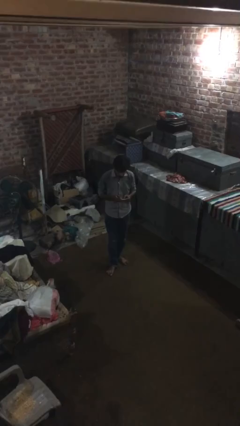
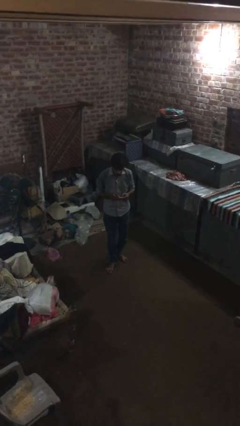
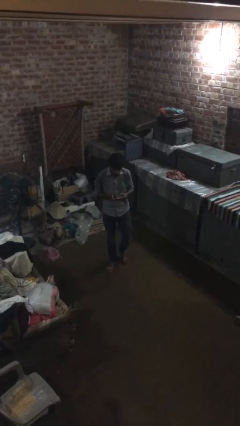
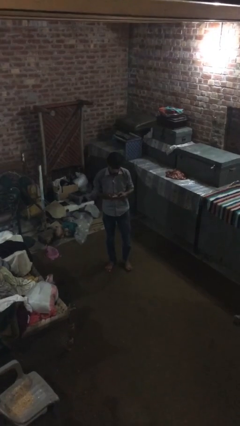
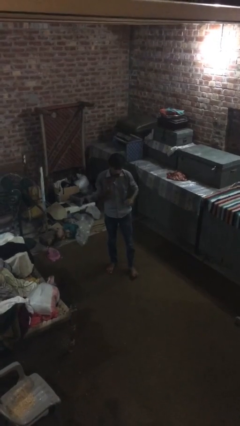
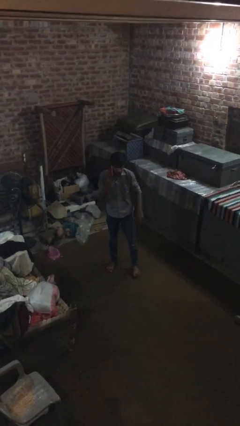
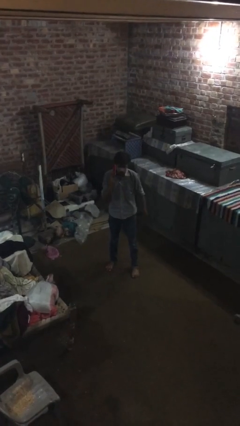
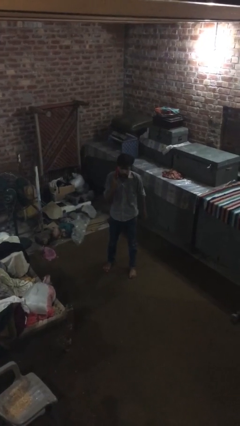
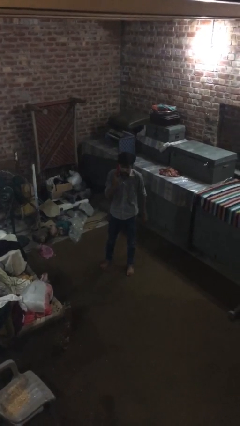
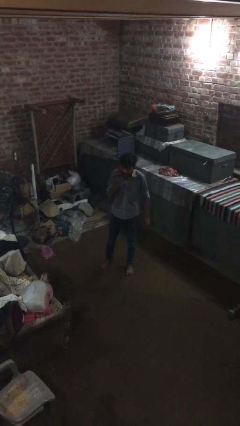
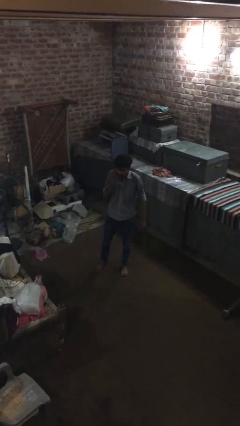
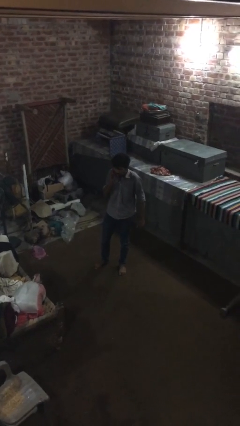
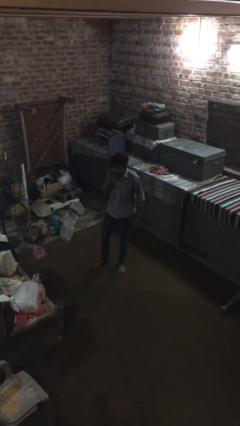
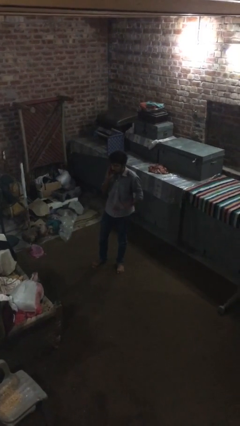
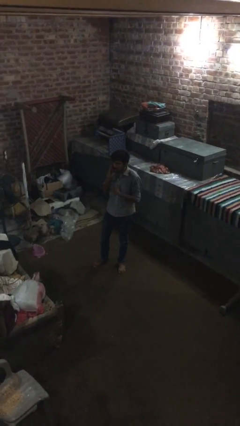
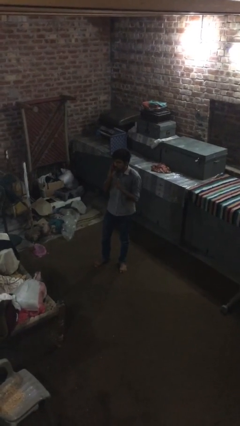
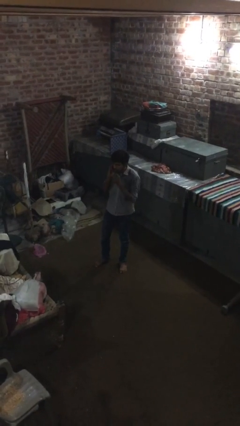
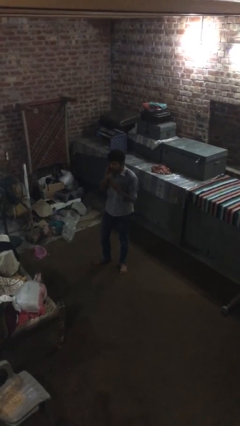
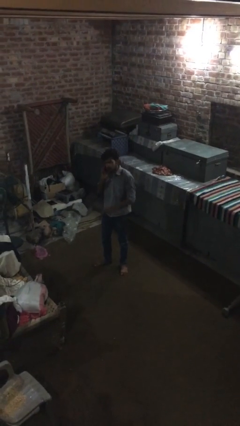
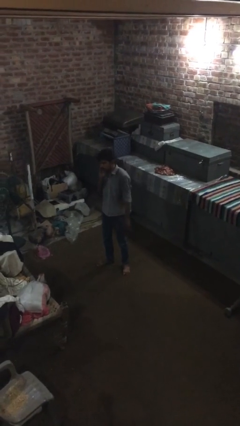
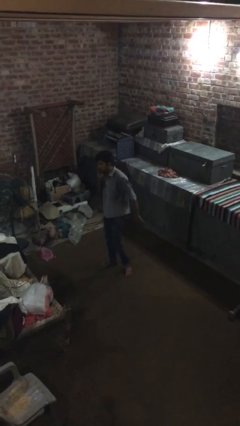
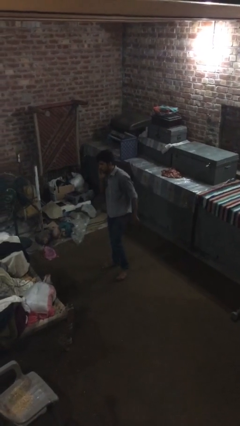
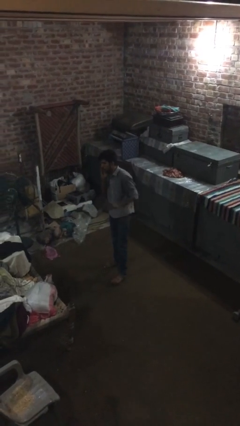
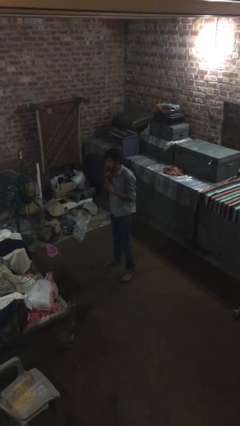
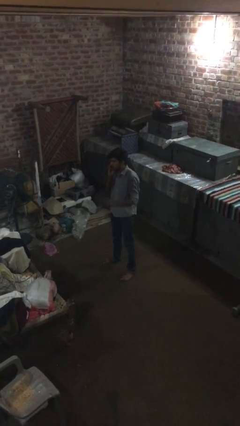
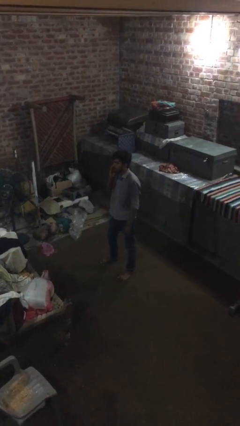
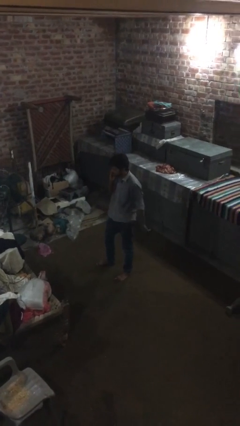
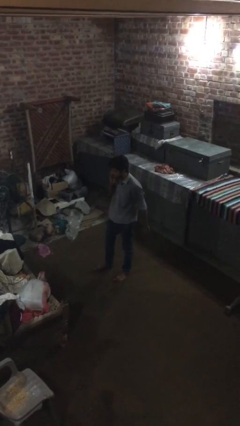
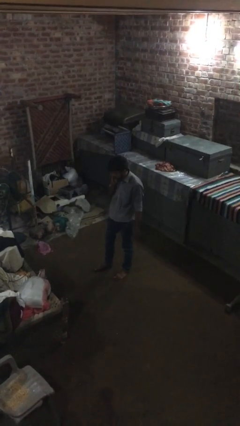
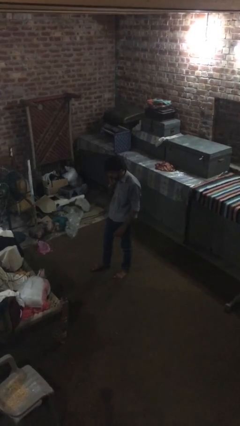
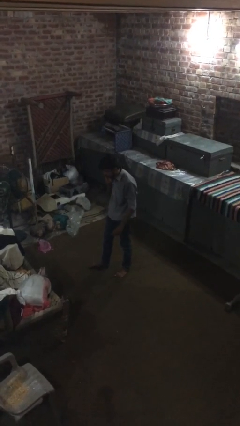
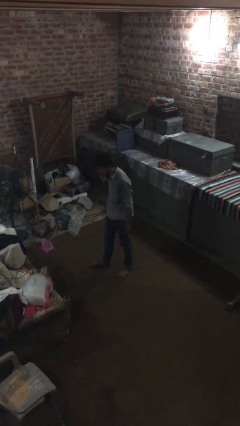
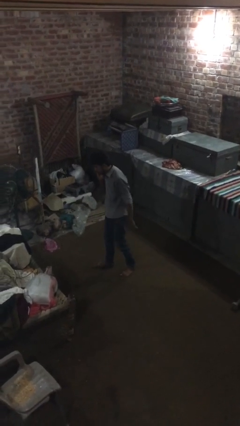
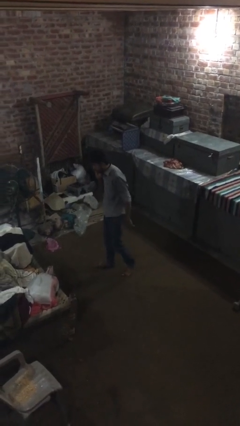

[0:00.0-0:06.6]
person talks on phone

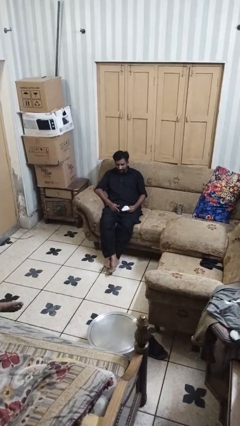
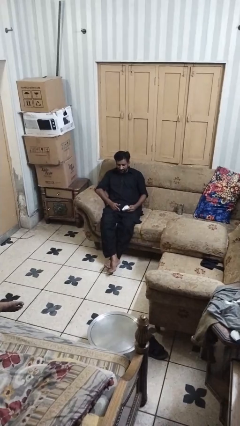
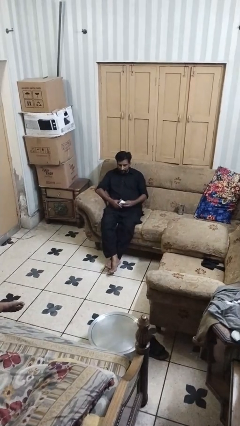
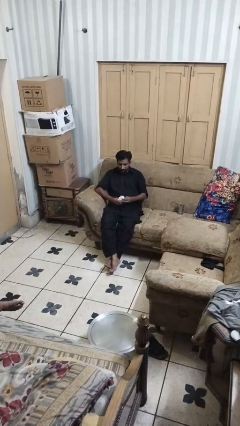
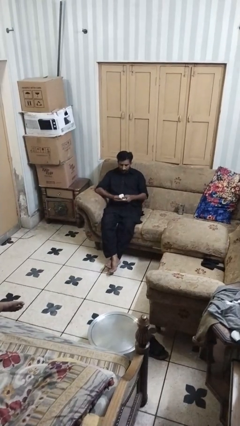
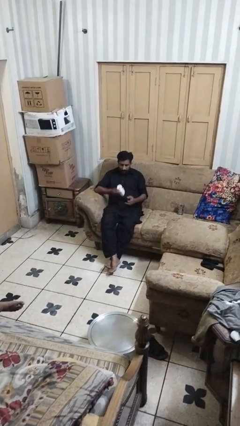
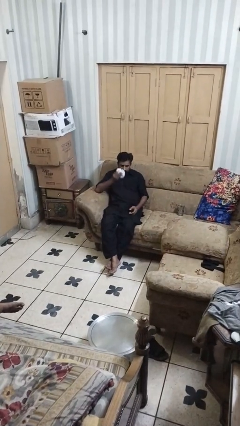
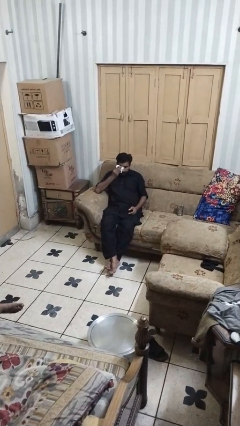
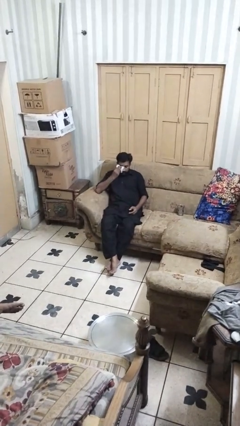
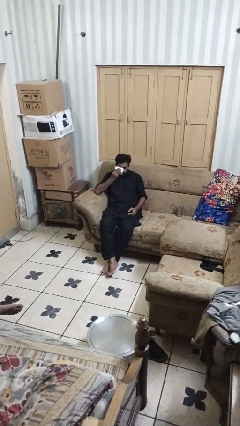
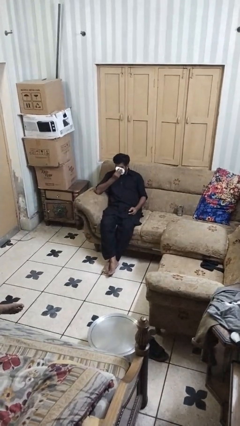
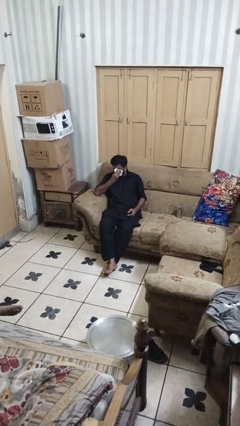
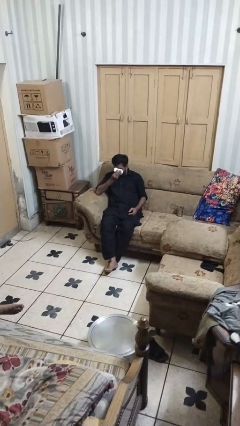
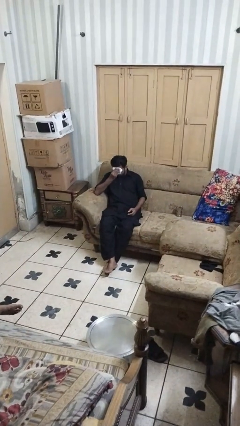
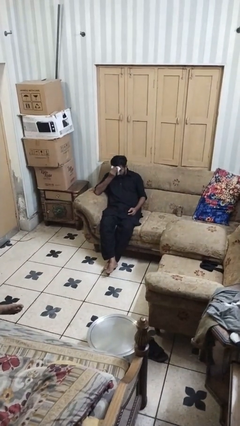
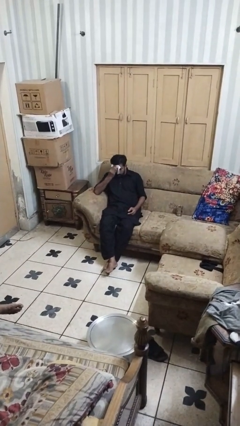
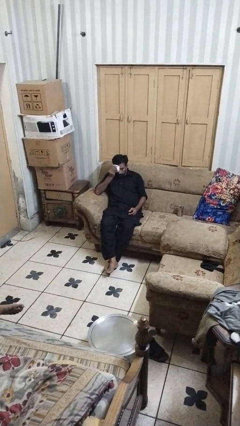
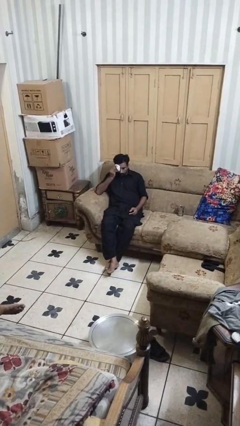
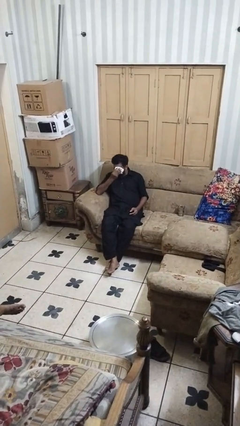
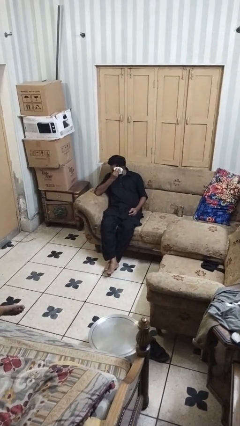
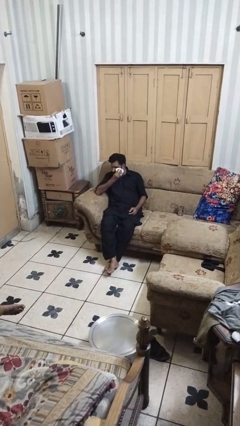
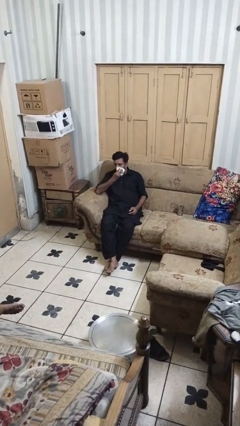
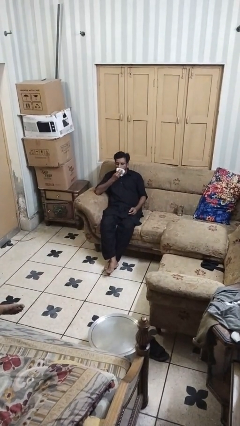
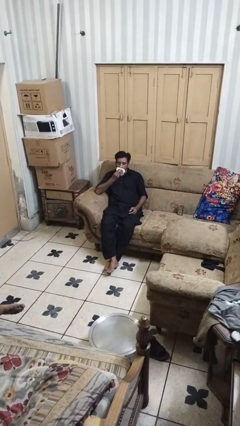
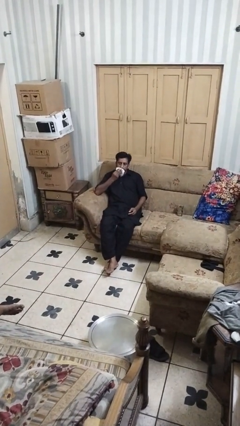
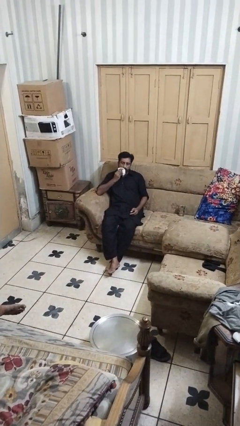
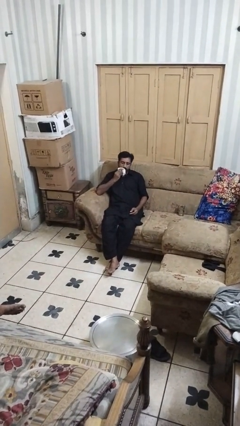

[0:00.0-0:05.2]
person wipes mouth with napkin

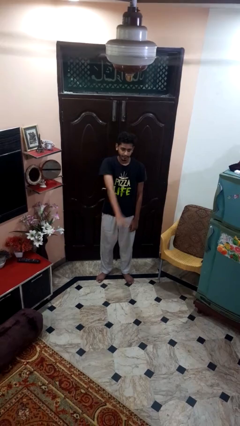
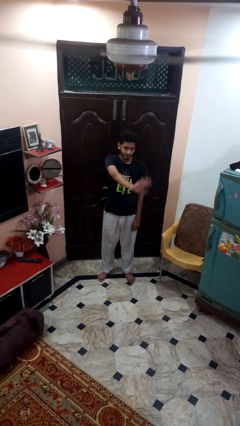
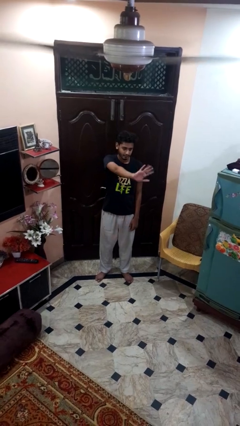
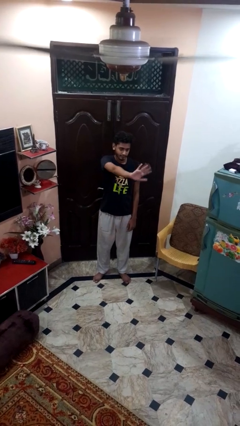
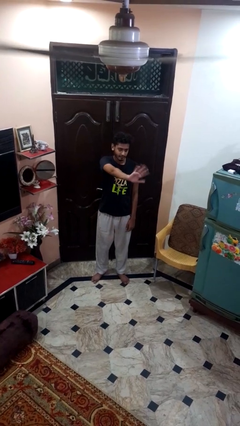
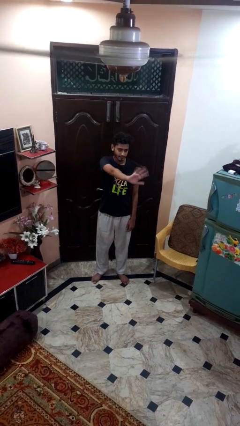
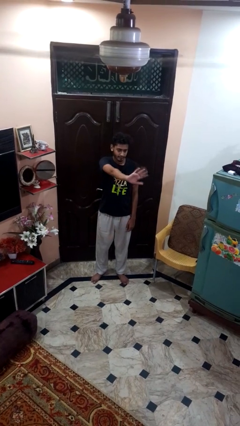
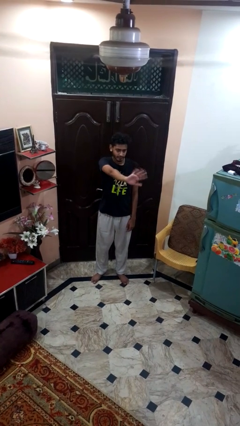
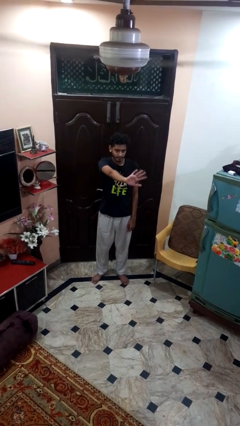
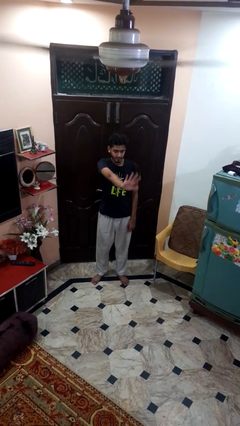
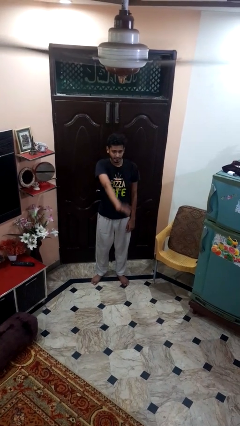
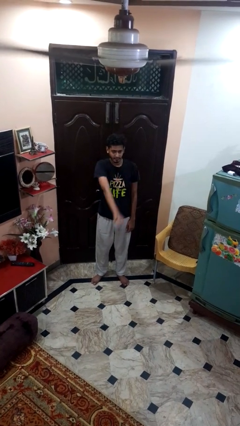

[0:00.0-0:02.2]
person waves at person

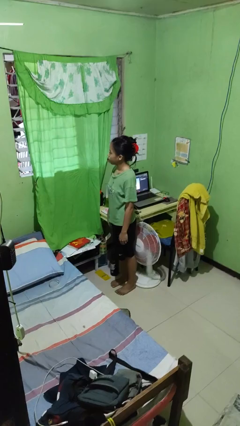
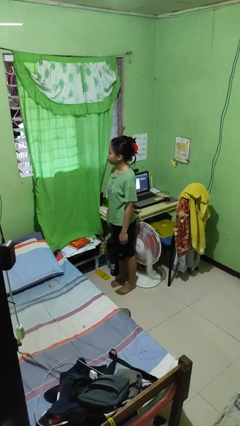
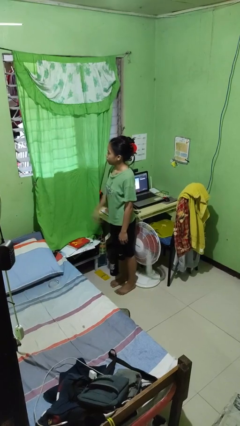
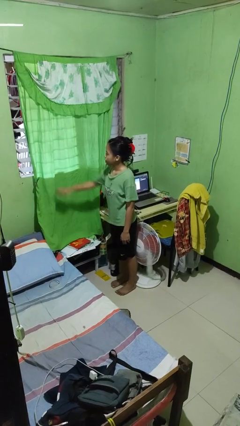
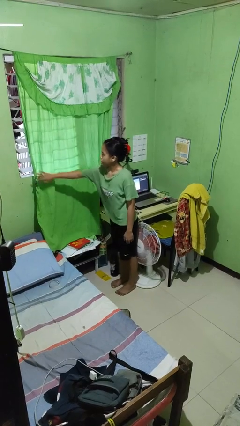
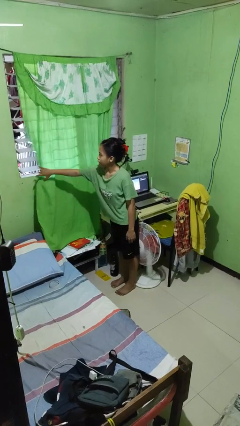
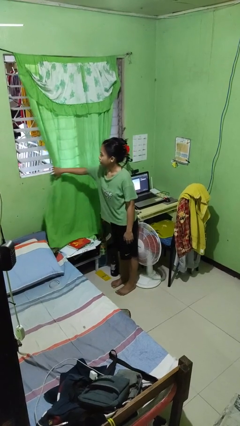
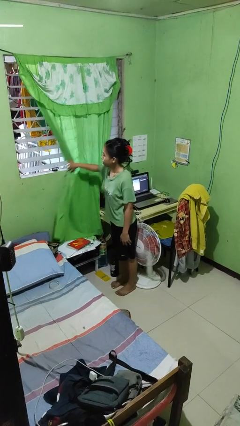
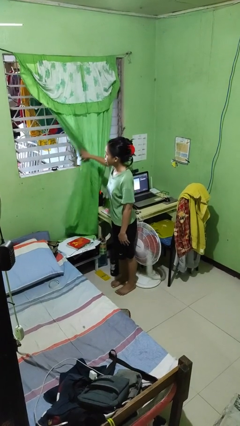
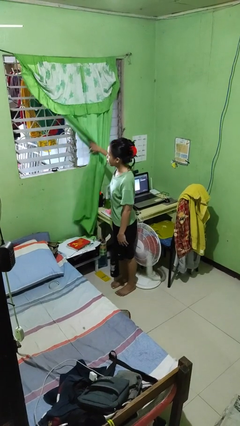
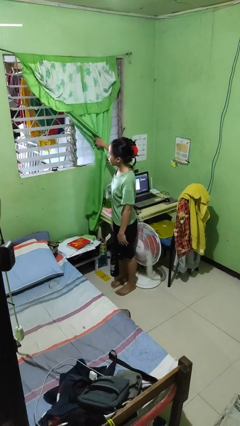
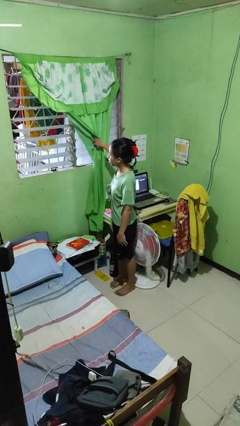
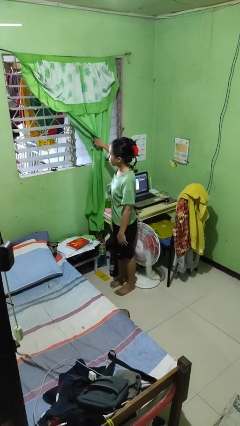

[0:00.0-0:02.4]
person opens curtains

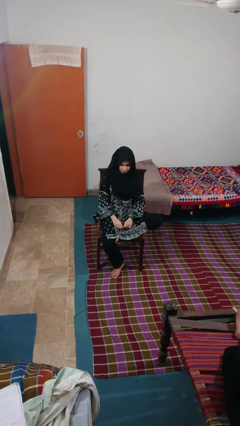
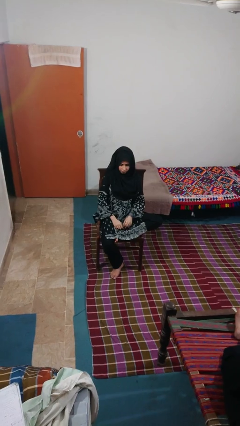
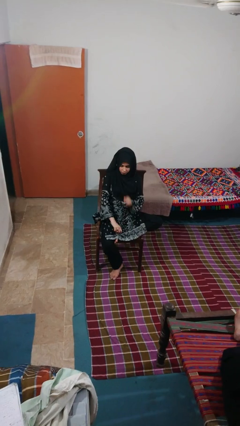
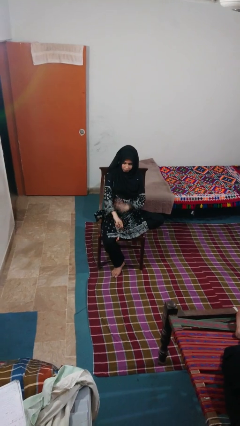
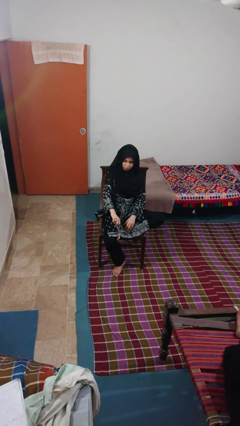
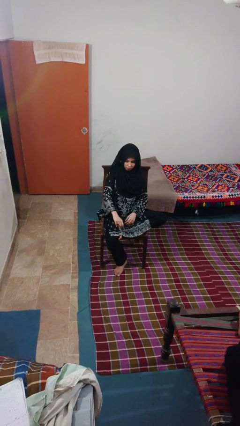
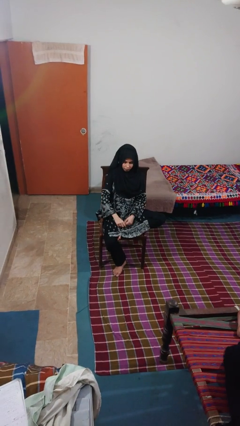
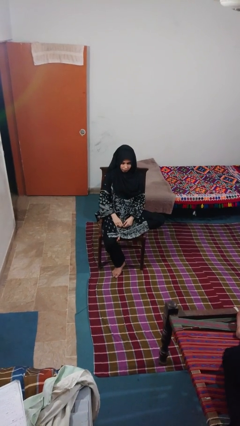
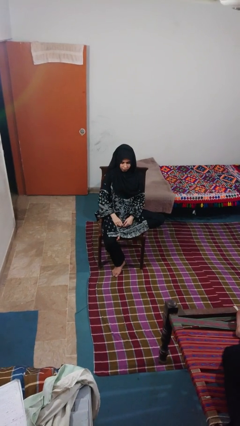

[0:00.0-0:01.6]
person swats bug
